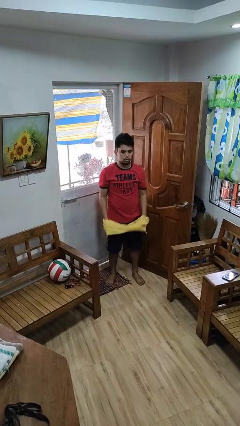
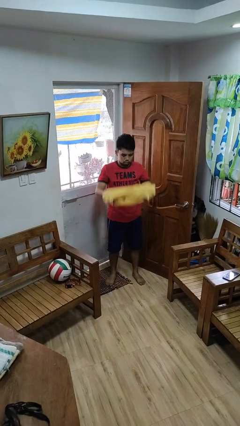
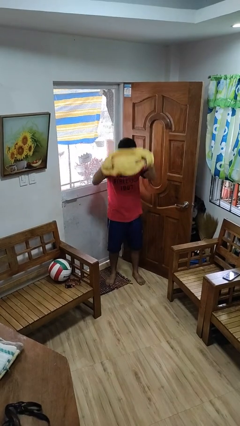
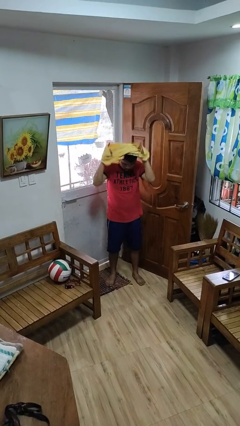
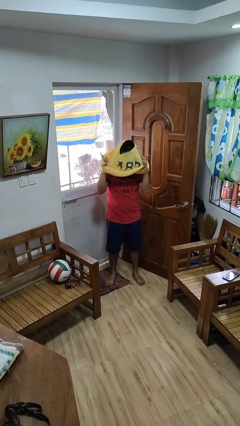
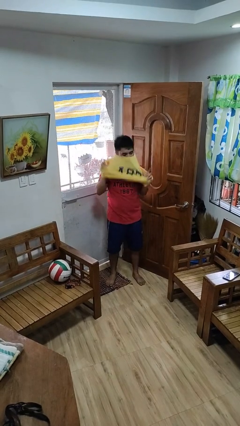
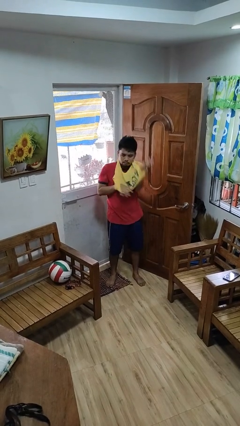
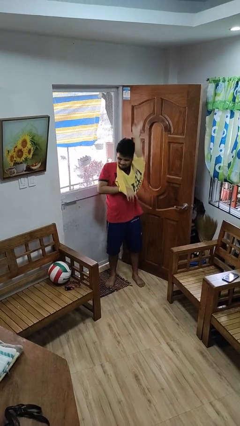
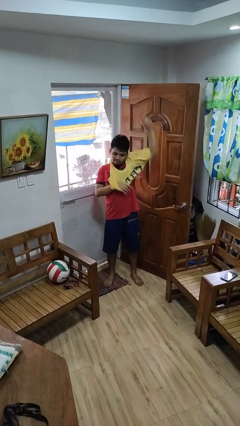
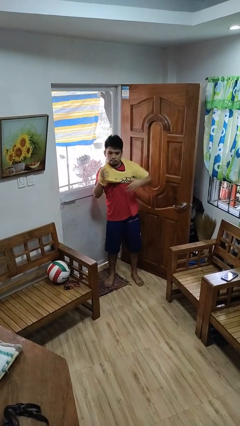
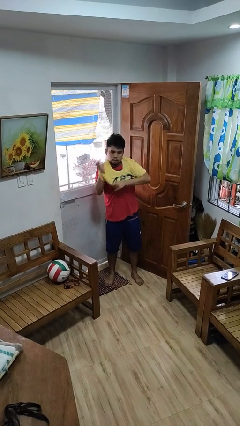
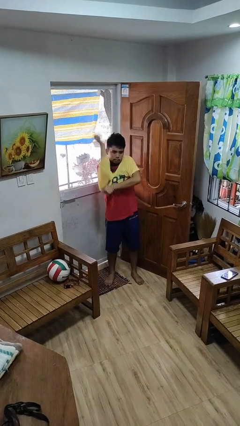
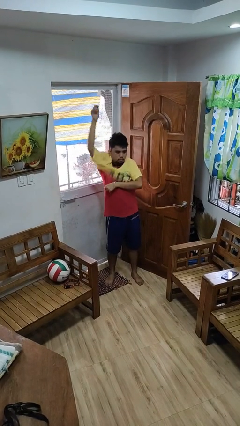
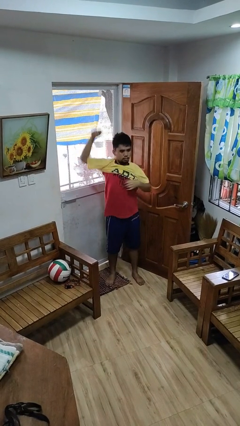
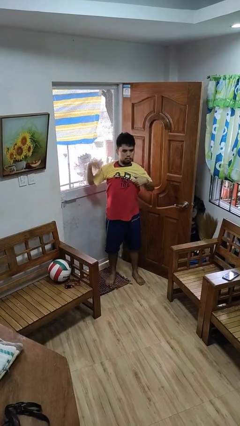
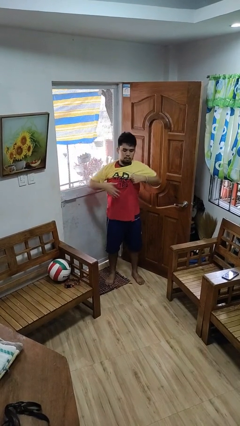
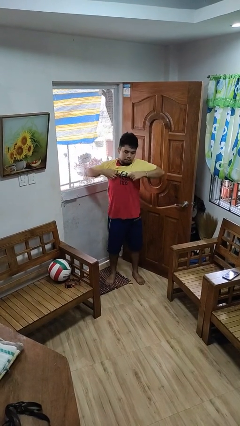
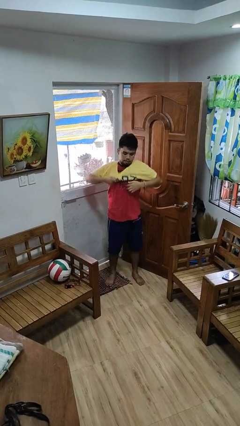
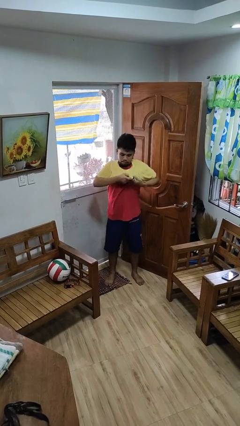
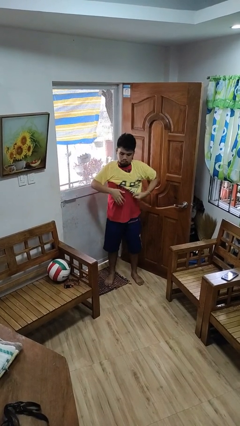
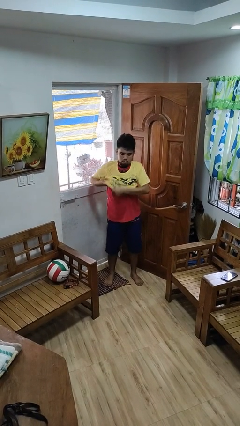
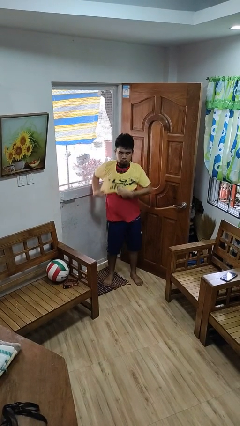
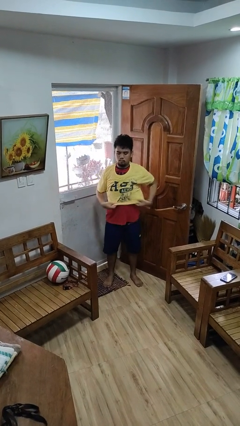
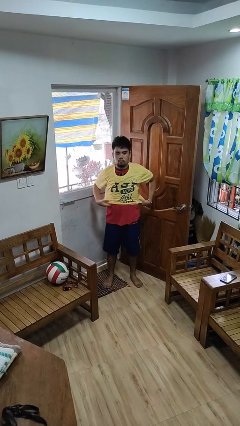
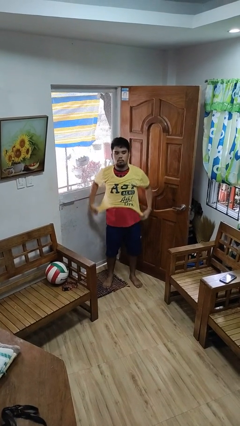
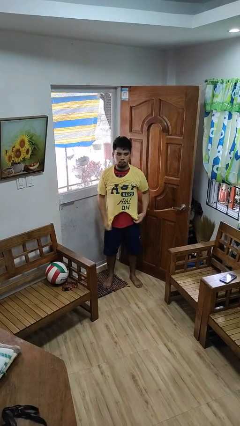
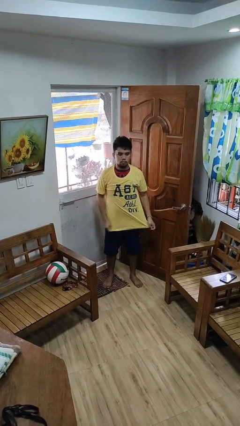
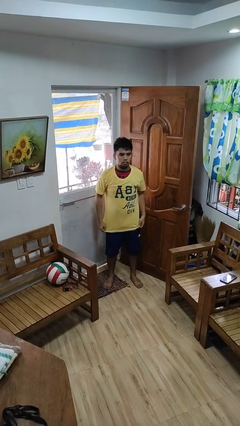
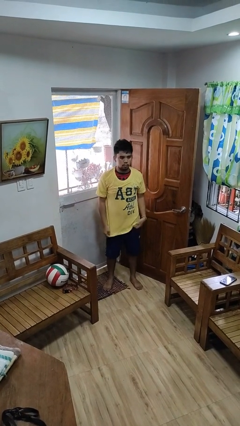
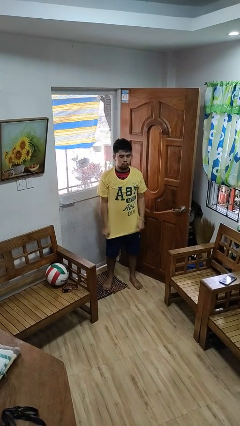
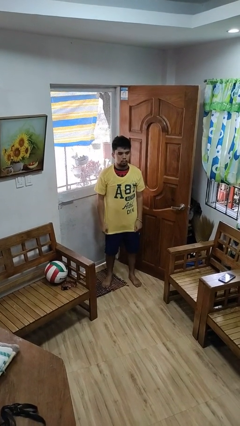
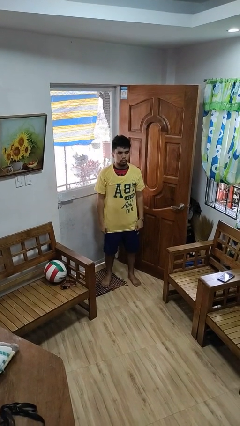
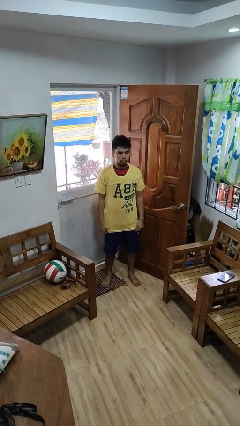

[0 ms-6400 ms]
person puts on shirt

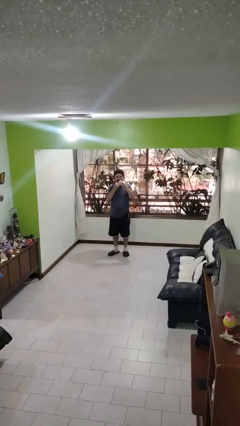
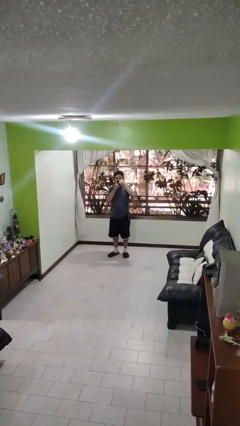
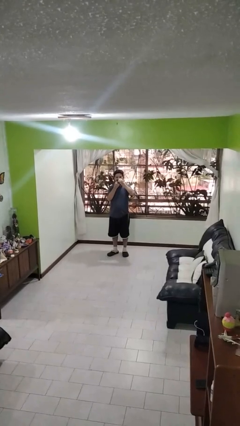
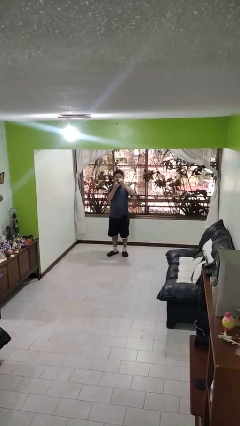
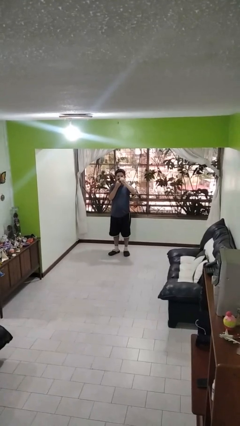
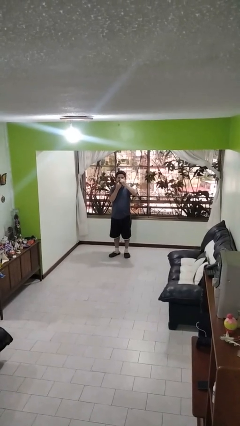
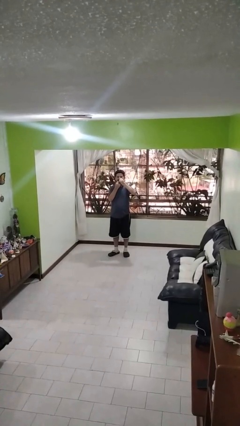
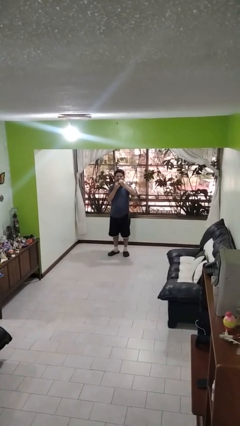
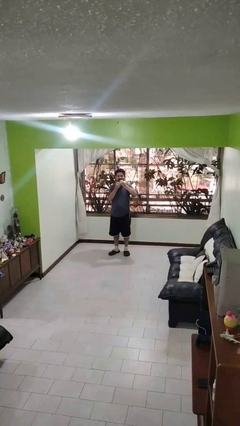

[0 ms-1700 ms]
person flosses

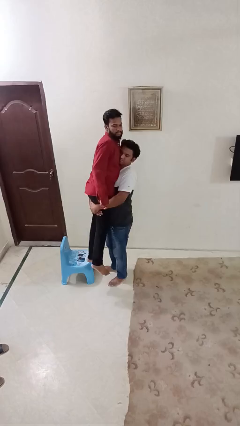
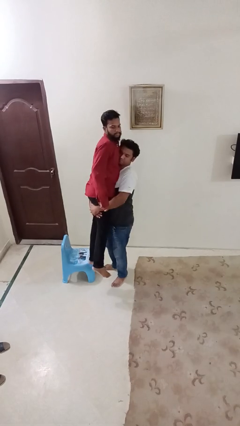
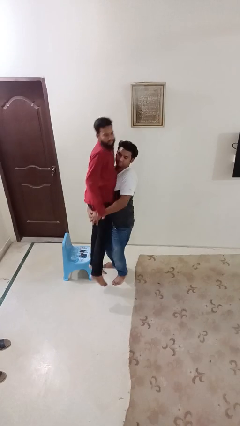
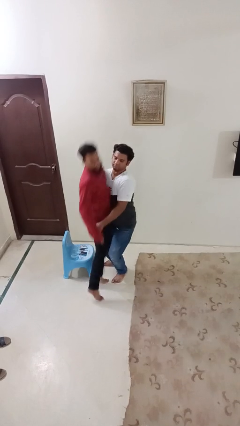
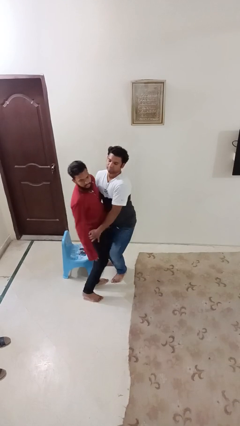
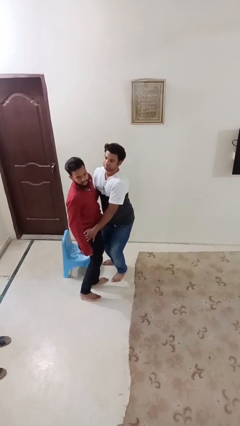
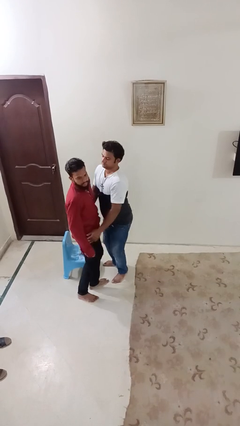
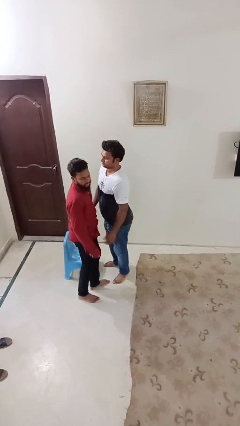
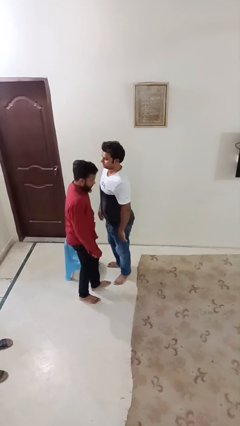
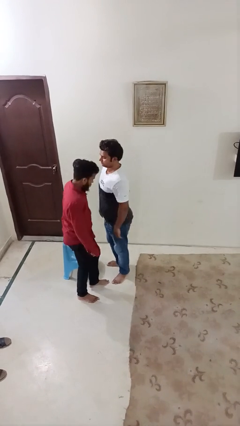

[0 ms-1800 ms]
person puts down person

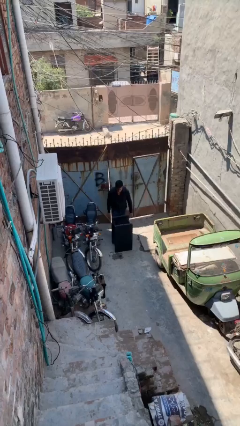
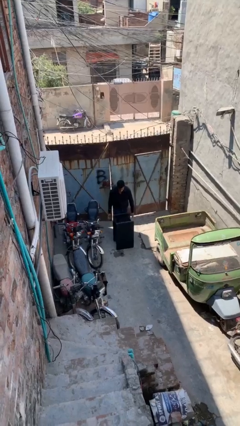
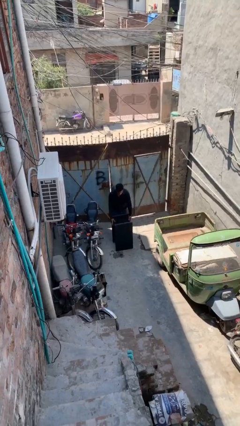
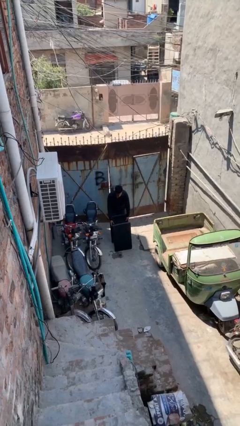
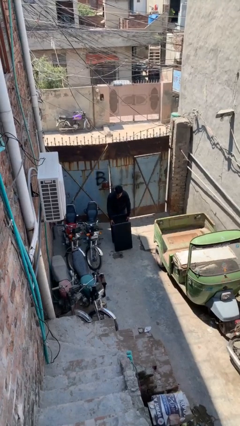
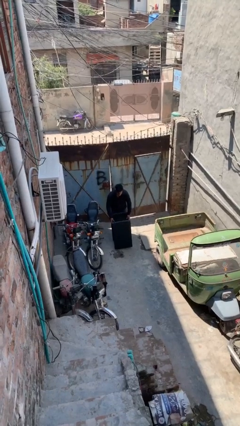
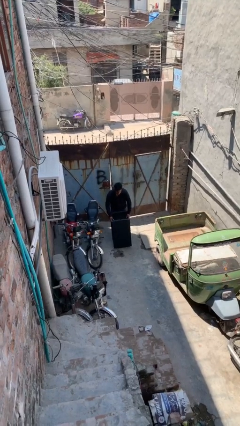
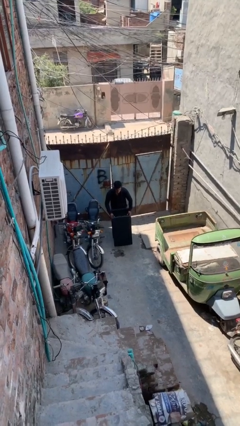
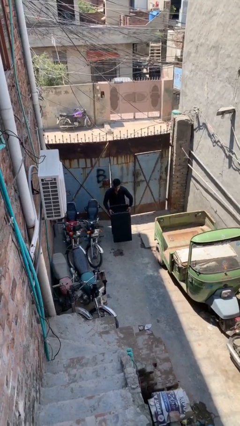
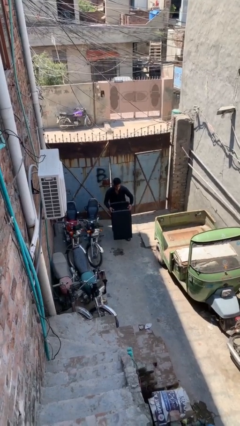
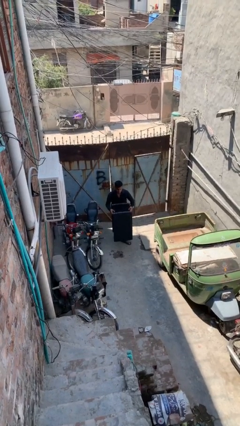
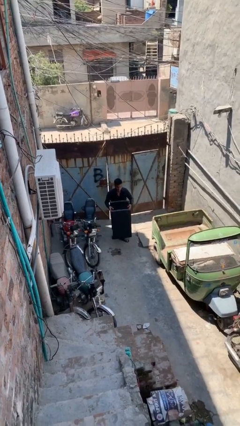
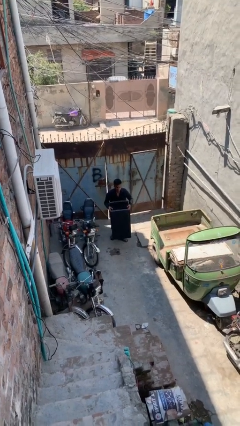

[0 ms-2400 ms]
person picks up object from floor

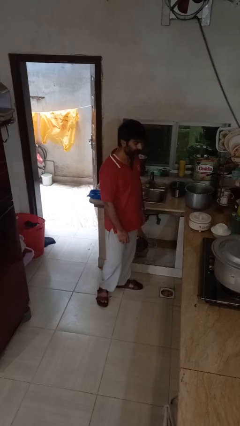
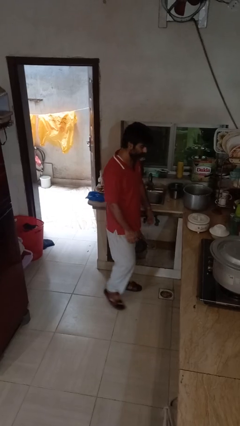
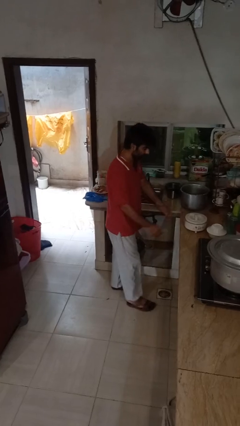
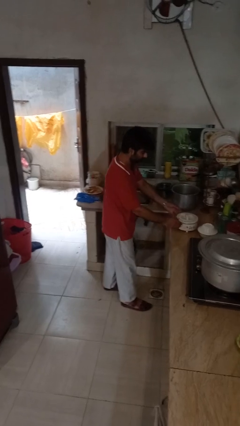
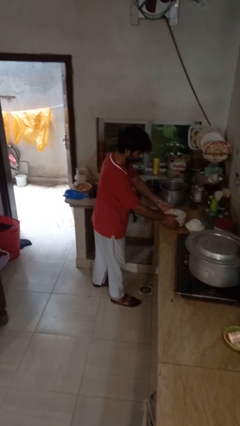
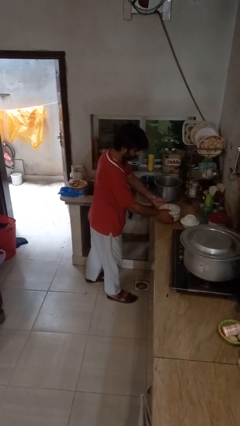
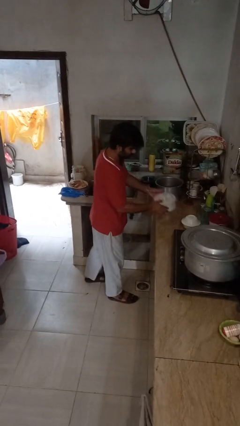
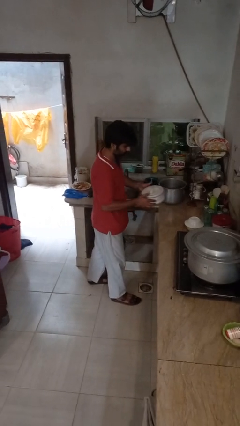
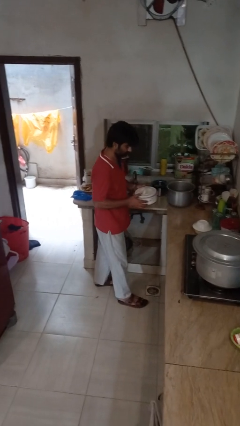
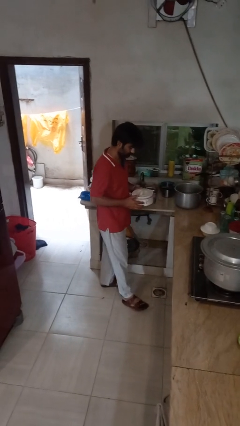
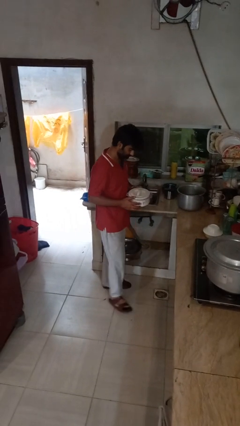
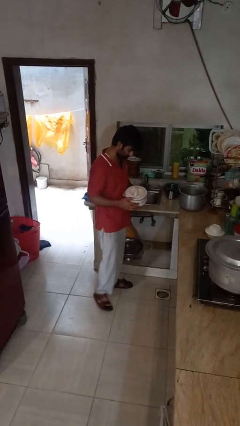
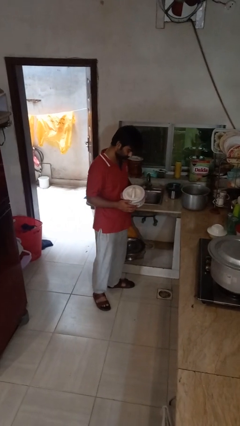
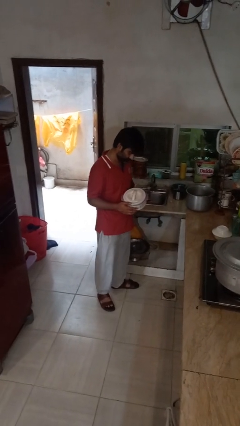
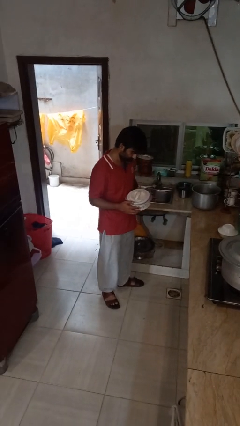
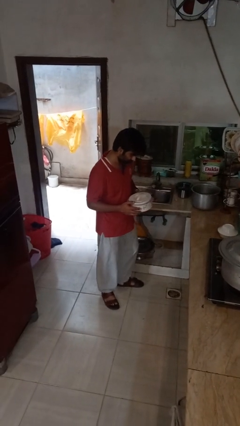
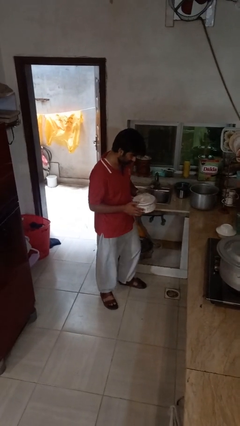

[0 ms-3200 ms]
person picks up object from countertop

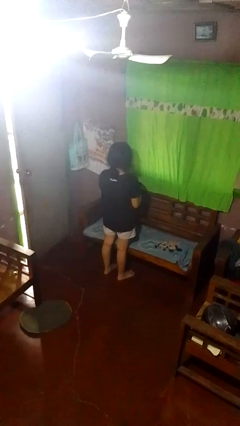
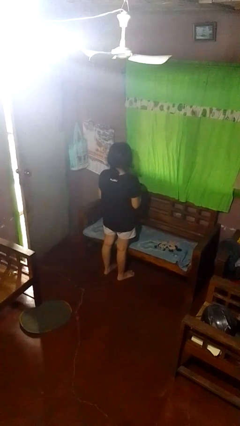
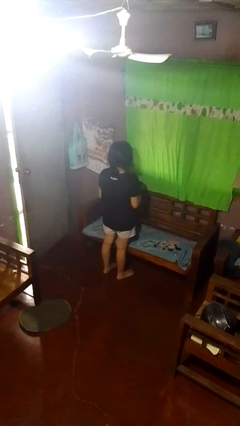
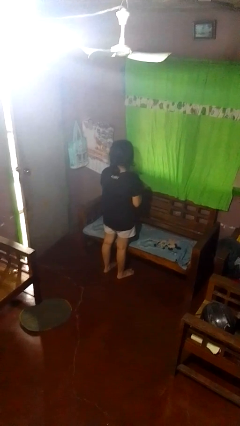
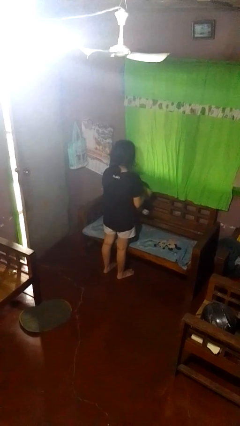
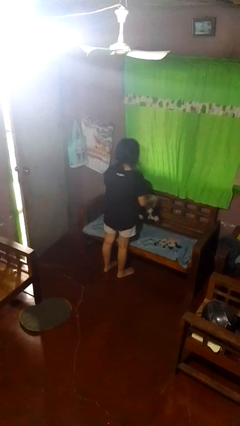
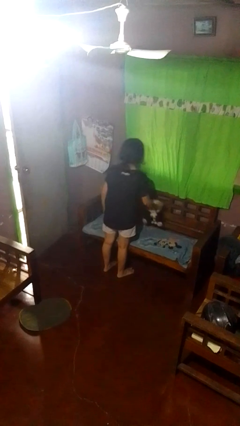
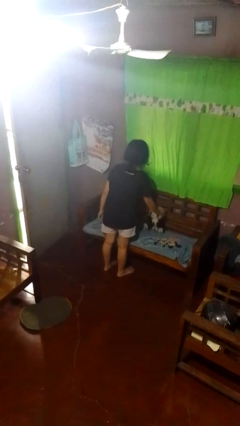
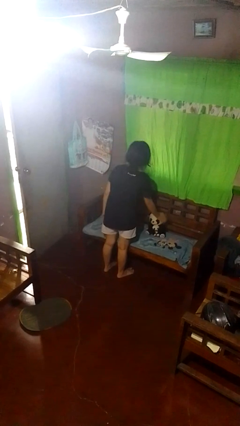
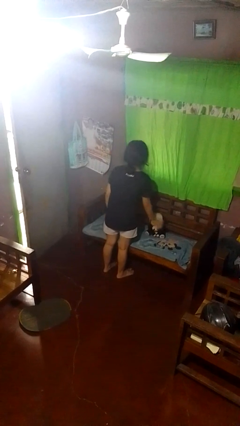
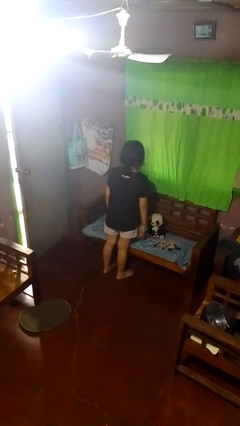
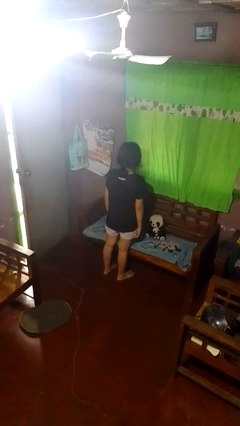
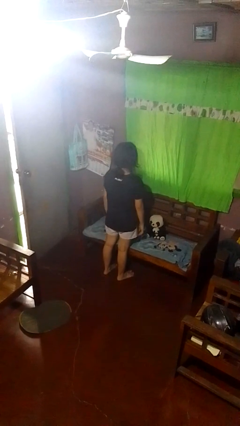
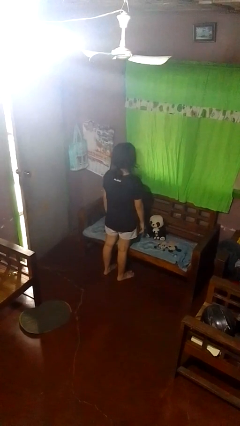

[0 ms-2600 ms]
person puts down object on couch
